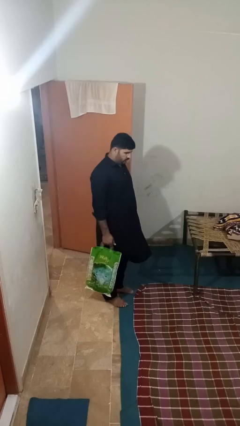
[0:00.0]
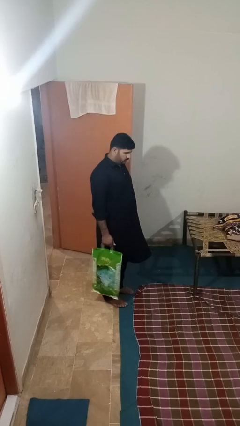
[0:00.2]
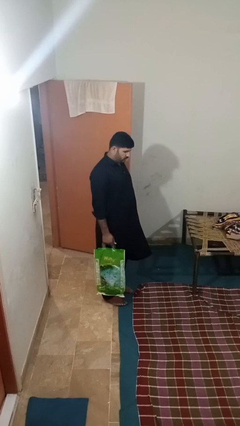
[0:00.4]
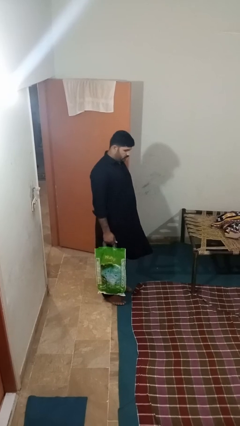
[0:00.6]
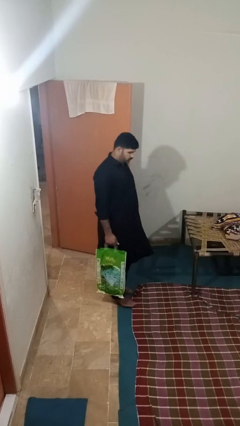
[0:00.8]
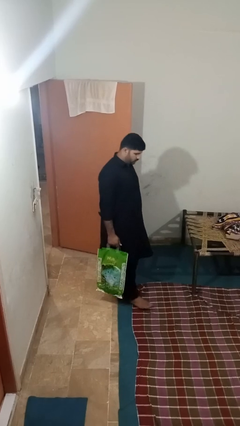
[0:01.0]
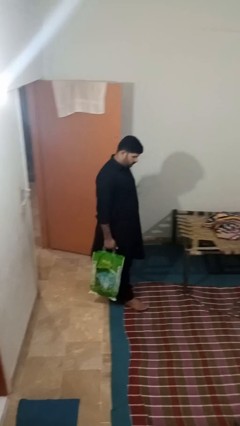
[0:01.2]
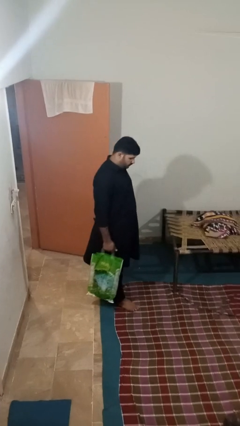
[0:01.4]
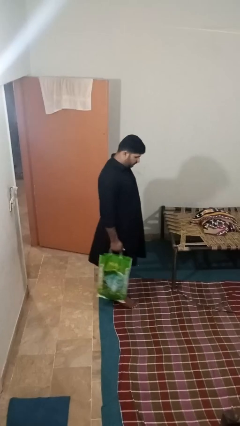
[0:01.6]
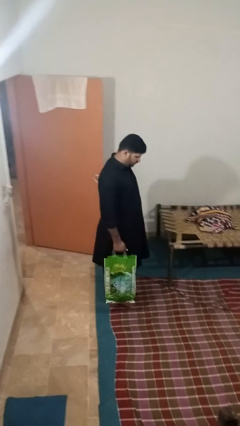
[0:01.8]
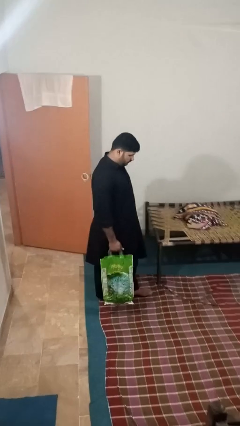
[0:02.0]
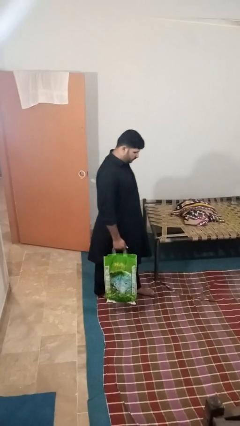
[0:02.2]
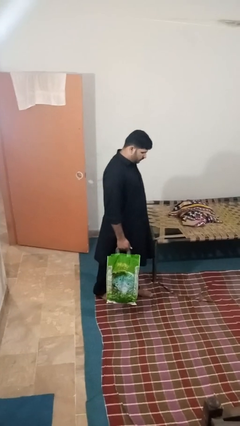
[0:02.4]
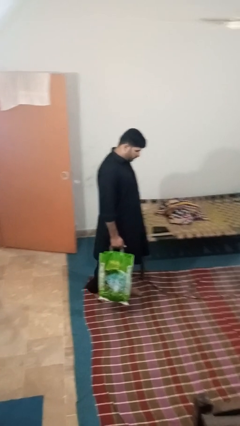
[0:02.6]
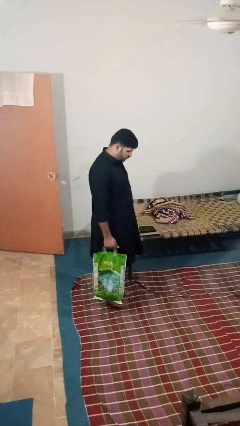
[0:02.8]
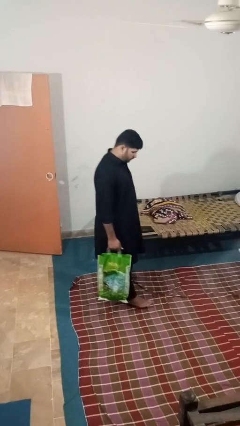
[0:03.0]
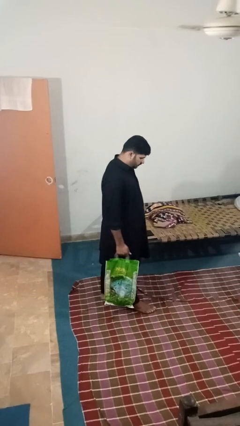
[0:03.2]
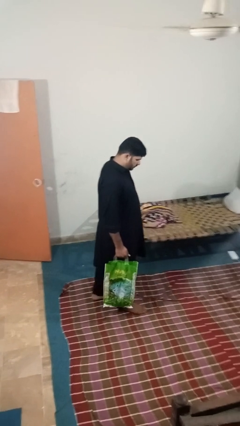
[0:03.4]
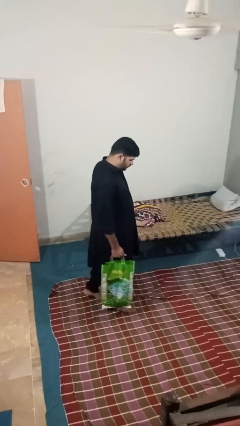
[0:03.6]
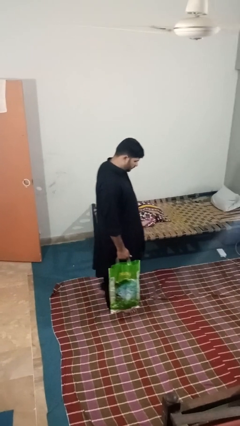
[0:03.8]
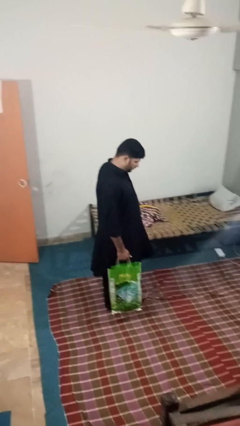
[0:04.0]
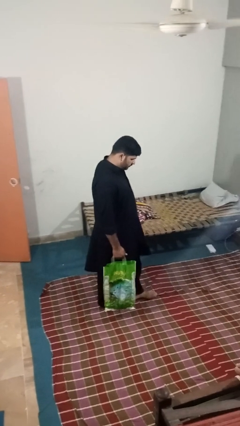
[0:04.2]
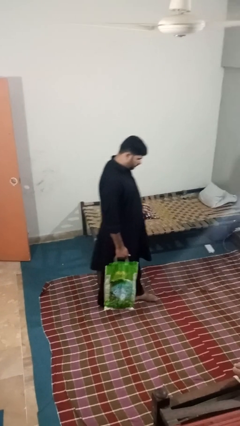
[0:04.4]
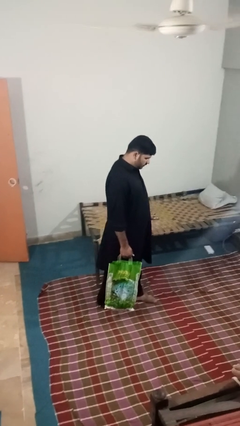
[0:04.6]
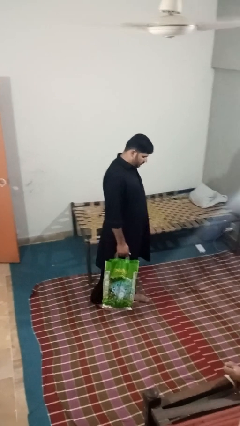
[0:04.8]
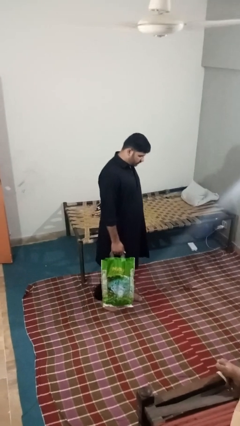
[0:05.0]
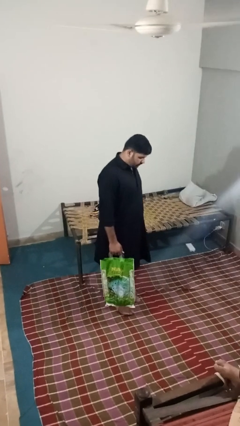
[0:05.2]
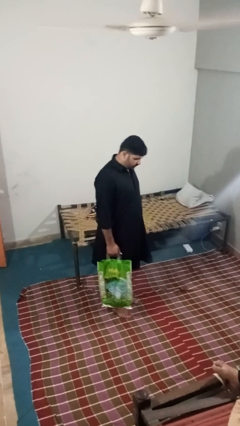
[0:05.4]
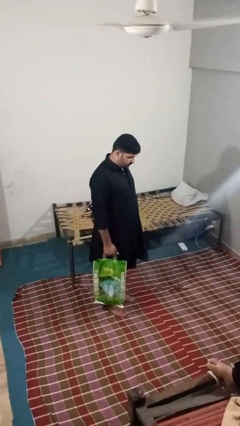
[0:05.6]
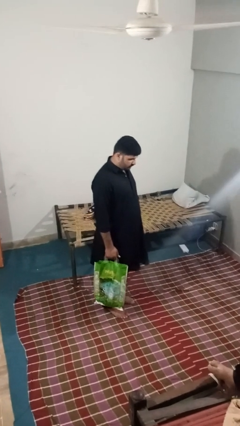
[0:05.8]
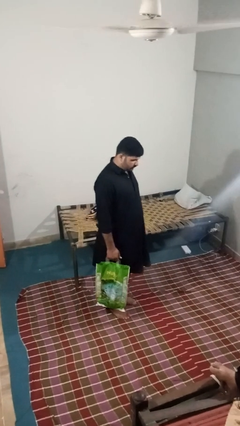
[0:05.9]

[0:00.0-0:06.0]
person carries groceries

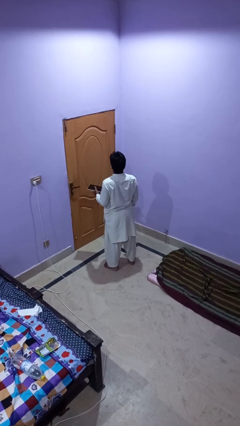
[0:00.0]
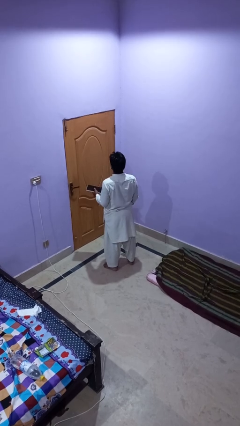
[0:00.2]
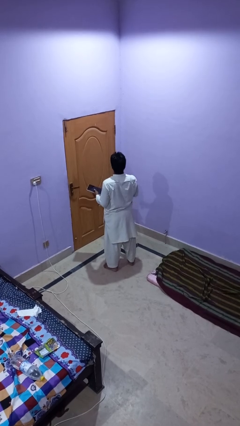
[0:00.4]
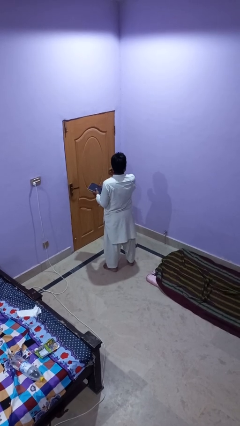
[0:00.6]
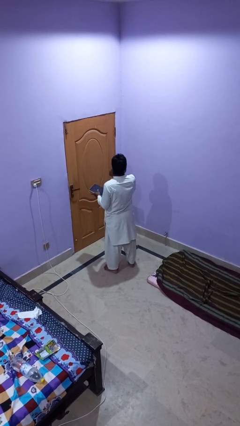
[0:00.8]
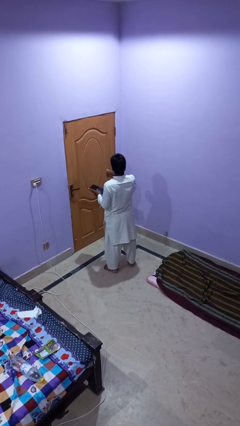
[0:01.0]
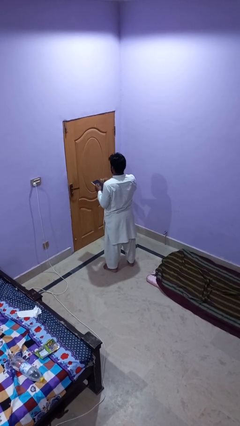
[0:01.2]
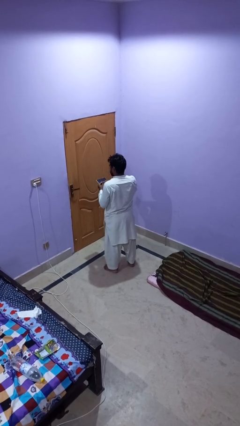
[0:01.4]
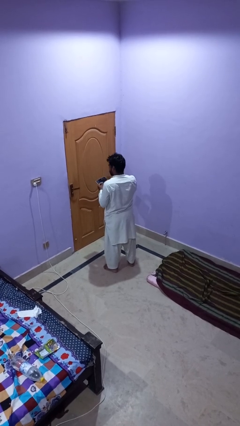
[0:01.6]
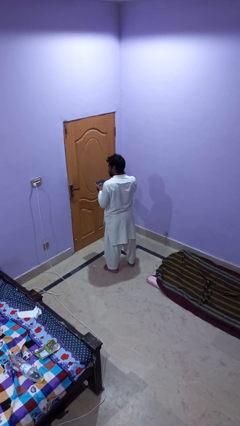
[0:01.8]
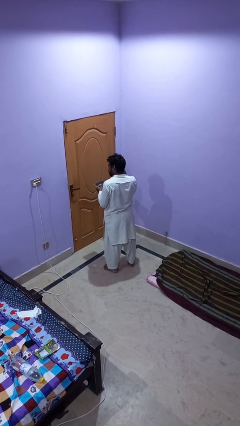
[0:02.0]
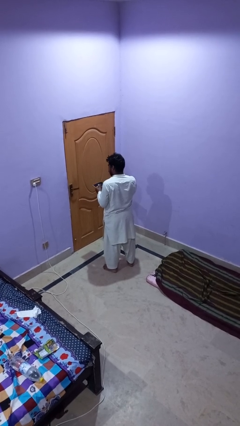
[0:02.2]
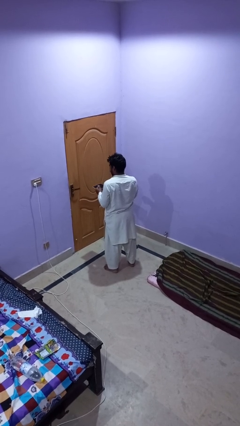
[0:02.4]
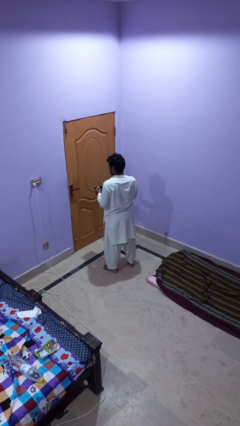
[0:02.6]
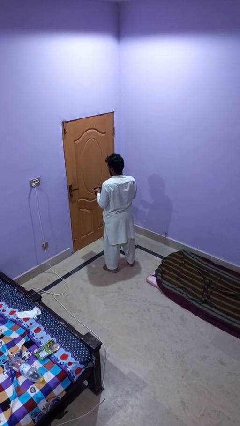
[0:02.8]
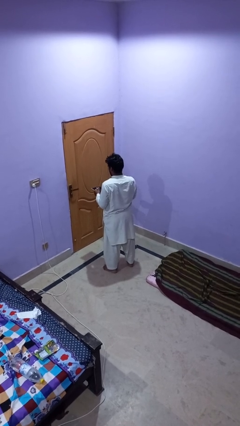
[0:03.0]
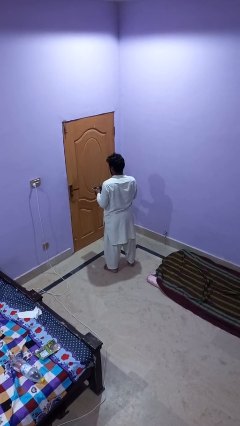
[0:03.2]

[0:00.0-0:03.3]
person takes off headphones

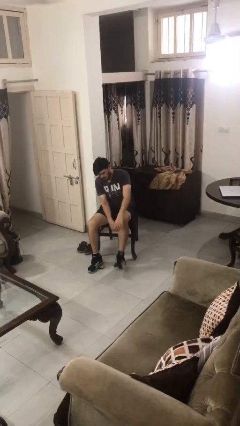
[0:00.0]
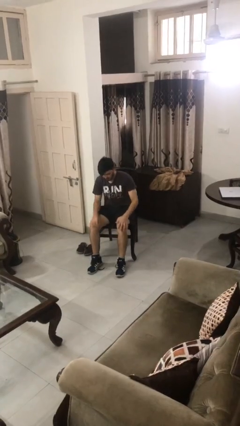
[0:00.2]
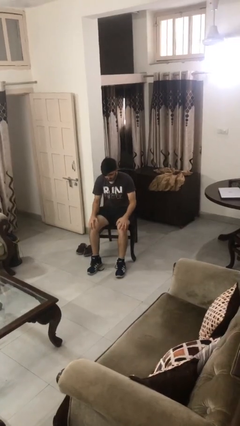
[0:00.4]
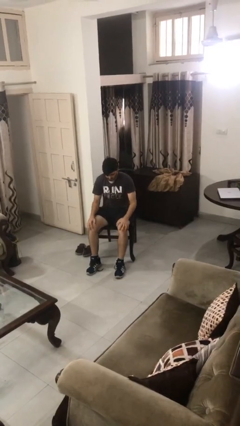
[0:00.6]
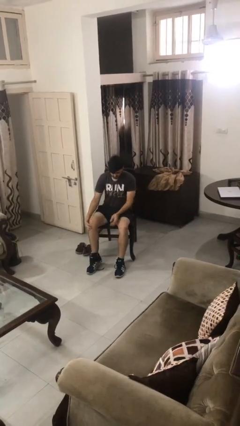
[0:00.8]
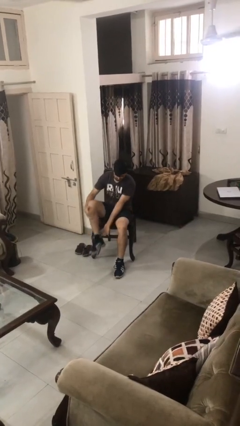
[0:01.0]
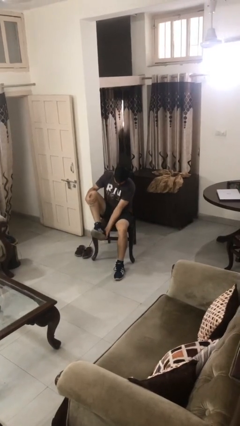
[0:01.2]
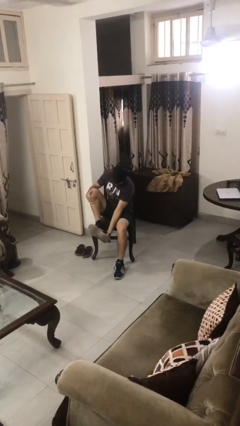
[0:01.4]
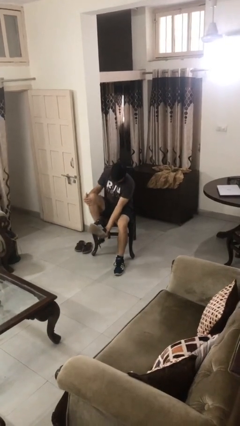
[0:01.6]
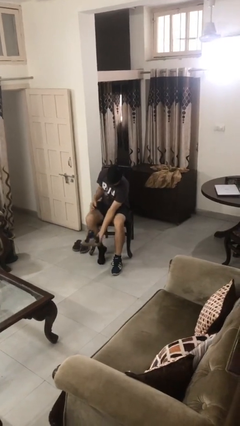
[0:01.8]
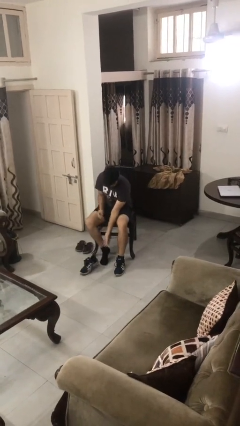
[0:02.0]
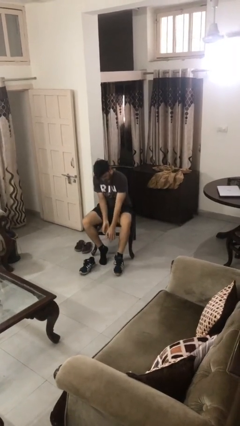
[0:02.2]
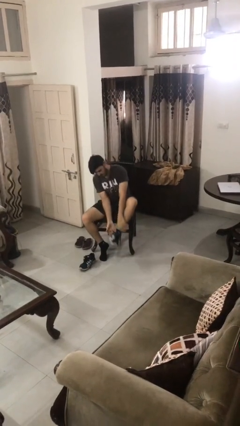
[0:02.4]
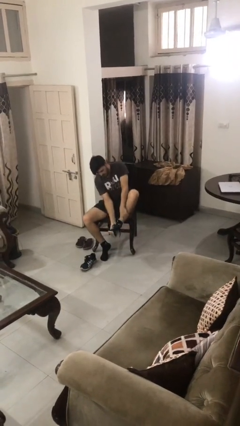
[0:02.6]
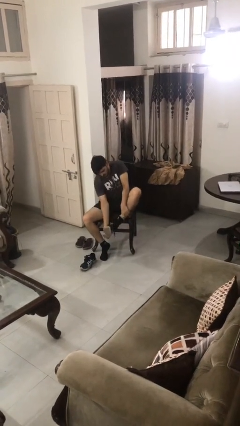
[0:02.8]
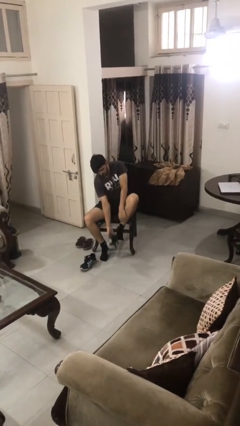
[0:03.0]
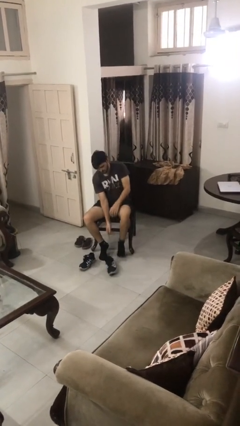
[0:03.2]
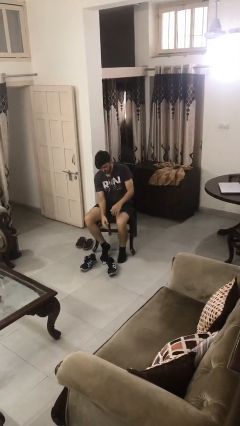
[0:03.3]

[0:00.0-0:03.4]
person takes off shoes

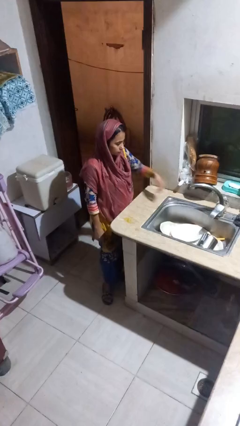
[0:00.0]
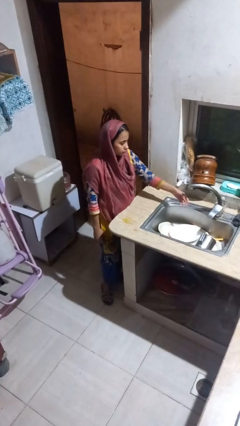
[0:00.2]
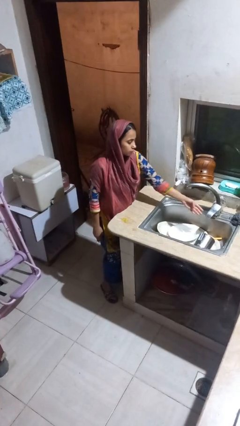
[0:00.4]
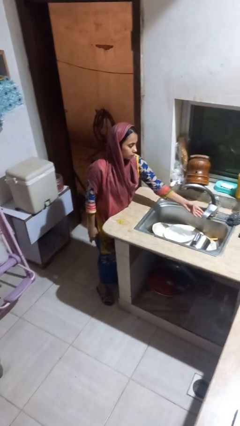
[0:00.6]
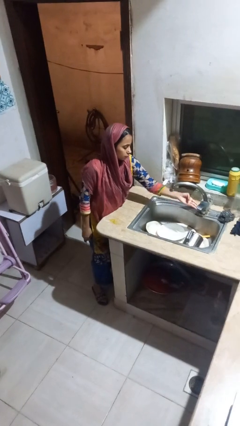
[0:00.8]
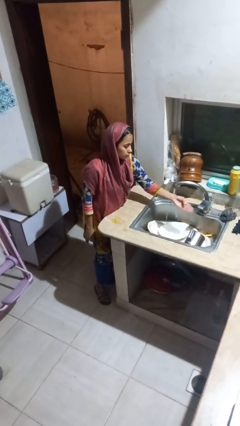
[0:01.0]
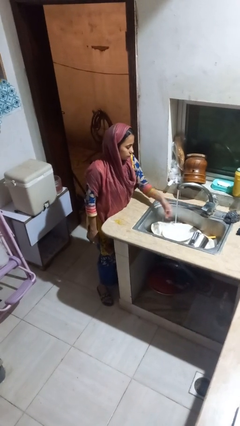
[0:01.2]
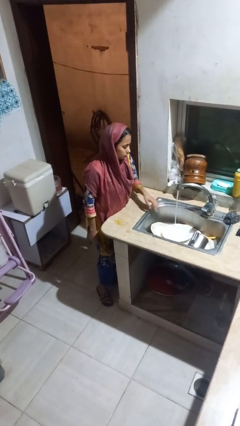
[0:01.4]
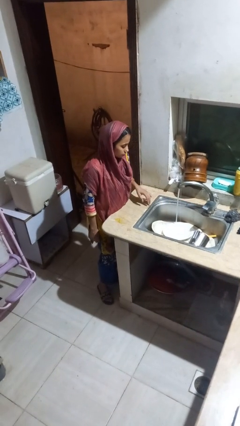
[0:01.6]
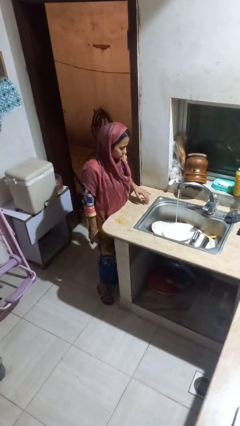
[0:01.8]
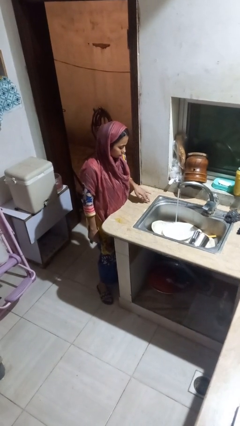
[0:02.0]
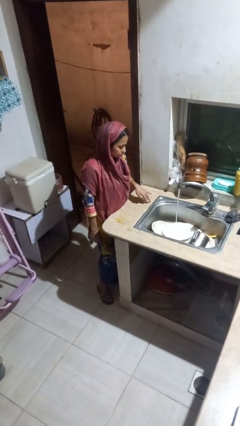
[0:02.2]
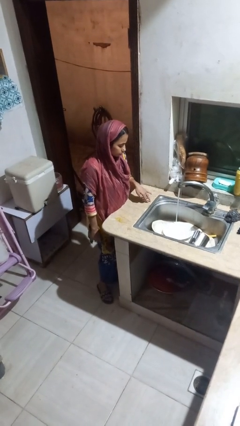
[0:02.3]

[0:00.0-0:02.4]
person turns on faucet

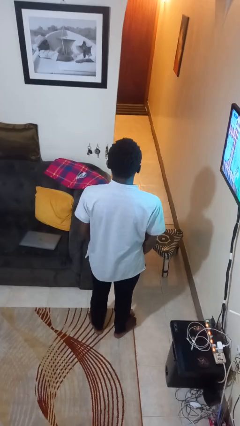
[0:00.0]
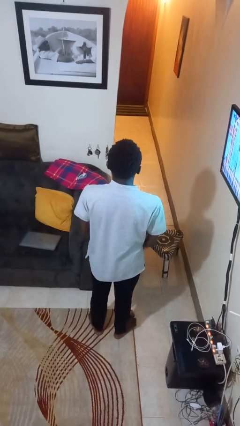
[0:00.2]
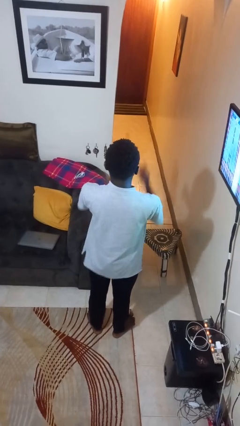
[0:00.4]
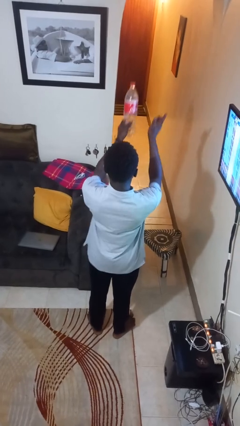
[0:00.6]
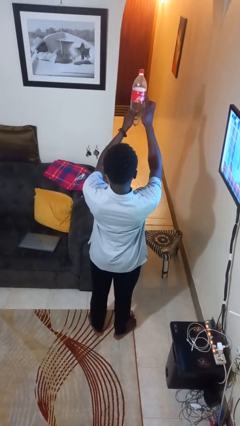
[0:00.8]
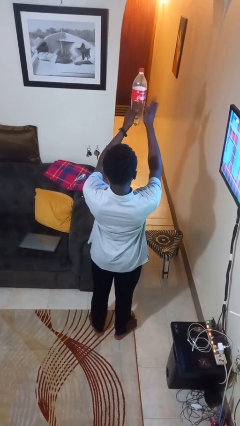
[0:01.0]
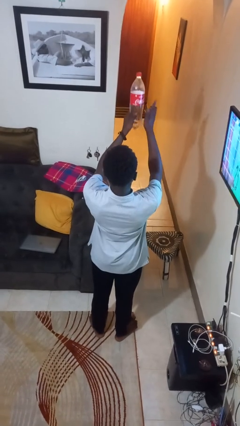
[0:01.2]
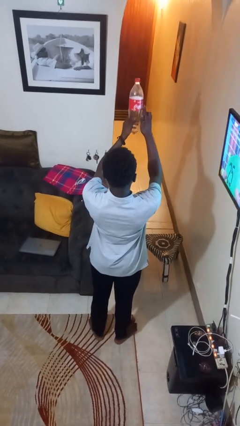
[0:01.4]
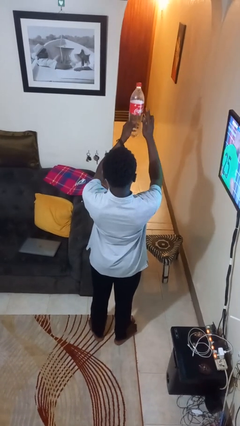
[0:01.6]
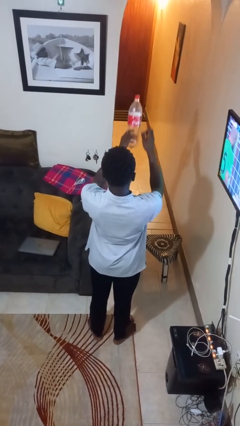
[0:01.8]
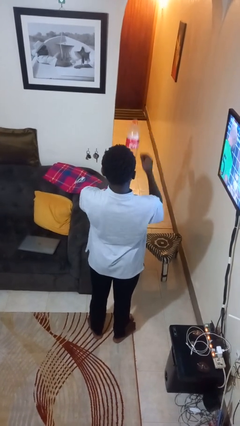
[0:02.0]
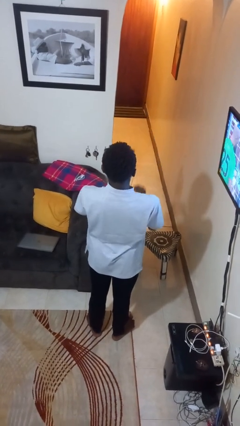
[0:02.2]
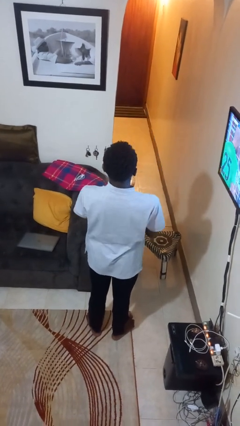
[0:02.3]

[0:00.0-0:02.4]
person taps object with finger

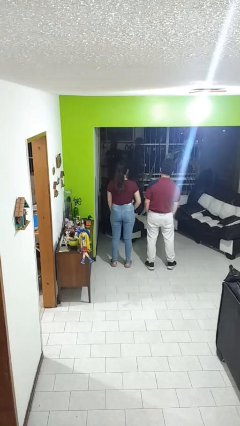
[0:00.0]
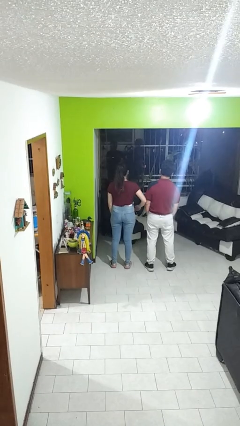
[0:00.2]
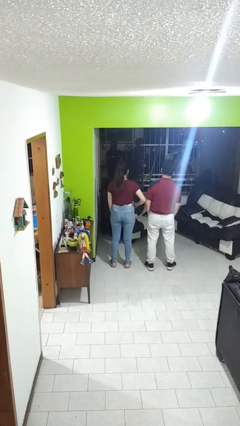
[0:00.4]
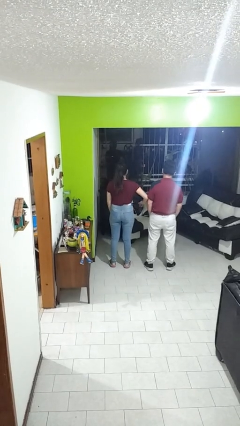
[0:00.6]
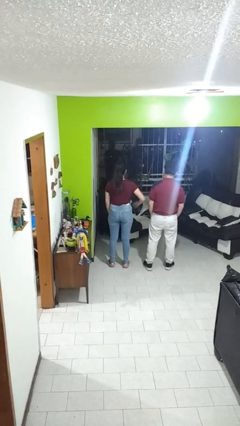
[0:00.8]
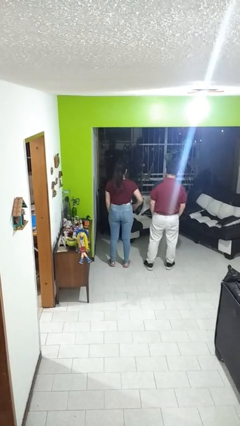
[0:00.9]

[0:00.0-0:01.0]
person nudges person with elbow
